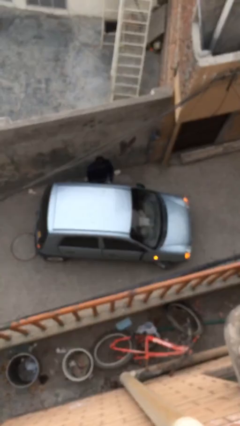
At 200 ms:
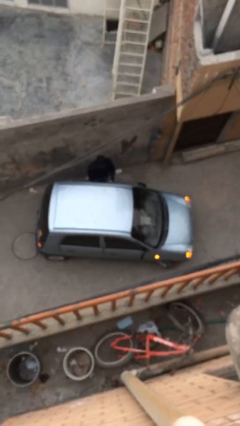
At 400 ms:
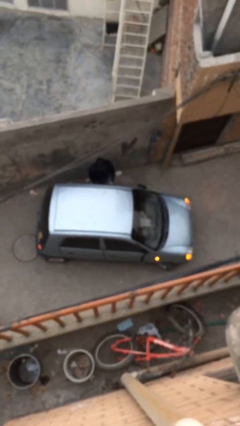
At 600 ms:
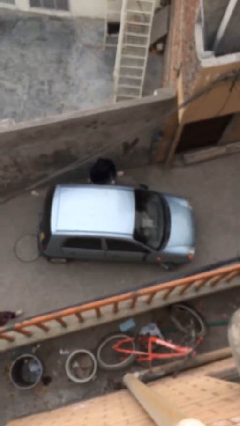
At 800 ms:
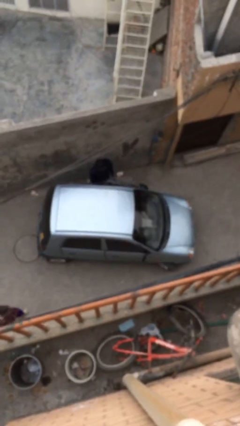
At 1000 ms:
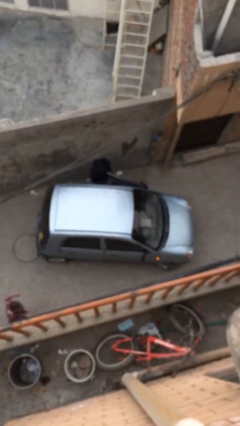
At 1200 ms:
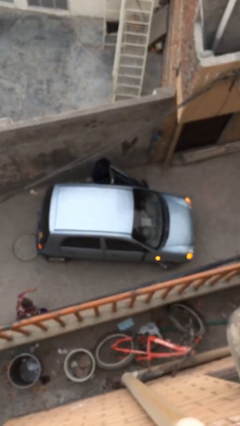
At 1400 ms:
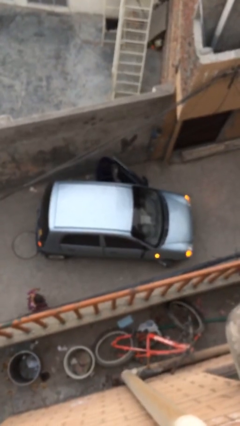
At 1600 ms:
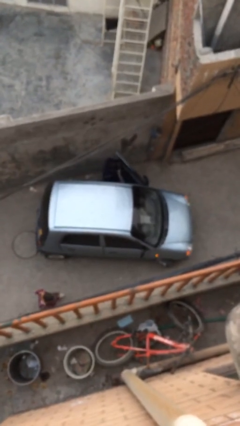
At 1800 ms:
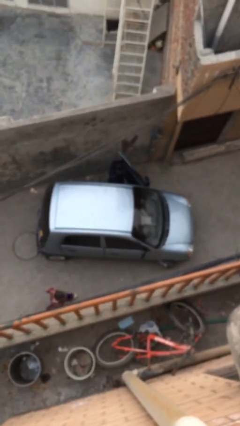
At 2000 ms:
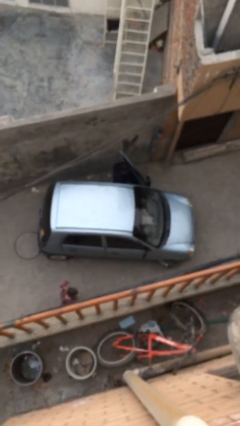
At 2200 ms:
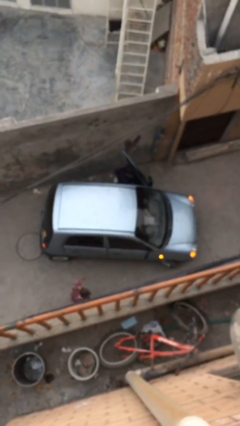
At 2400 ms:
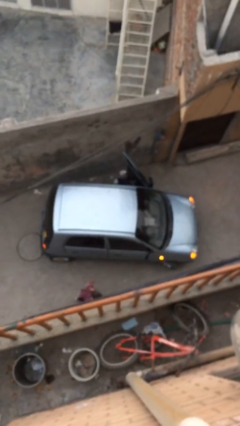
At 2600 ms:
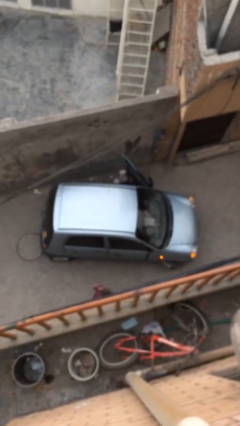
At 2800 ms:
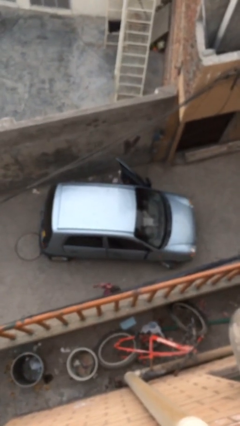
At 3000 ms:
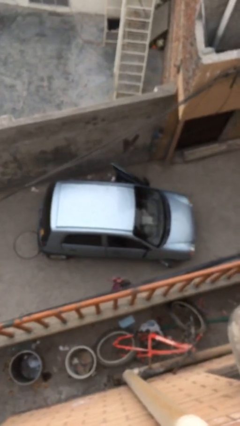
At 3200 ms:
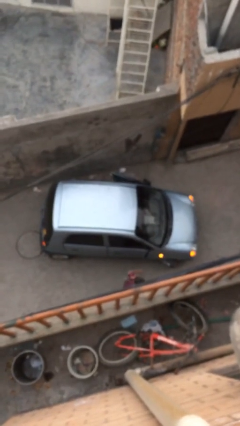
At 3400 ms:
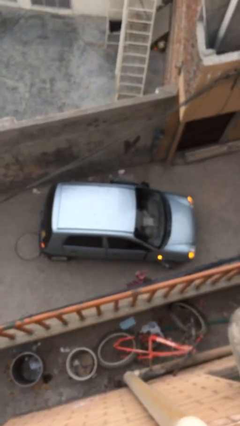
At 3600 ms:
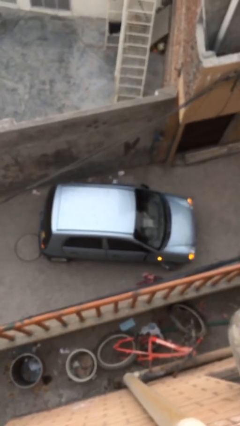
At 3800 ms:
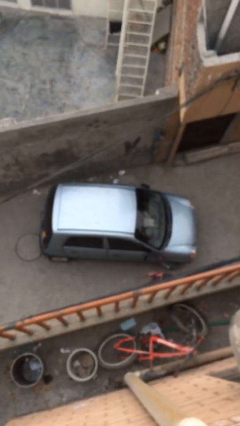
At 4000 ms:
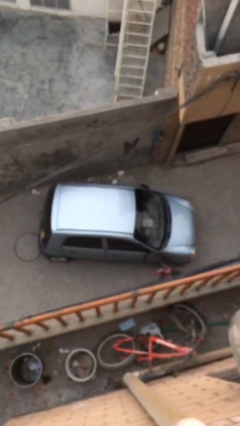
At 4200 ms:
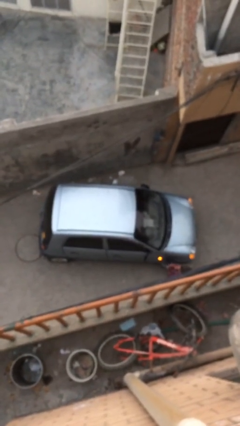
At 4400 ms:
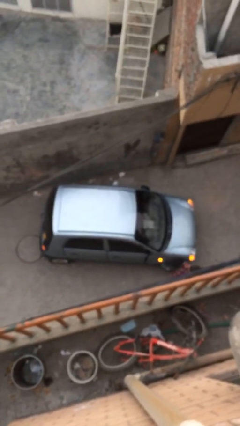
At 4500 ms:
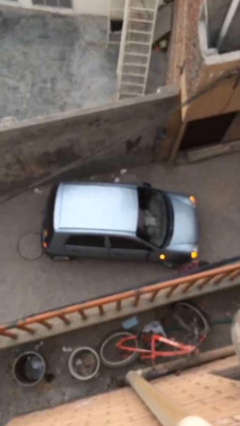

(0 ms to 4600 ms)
car picks up person

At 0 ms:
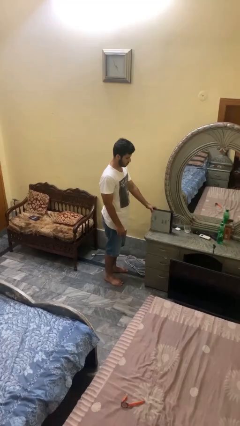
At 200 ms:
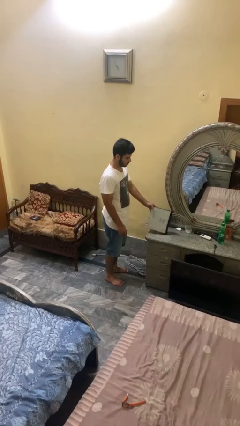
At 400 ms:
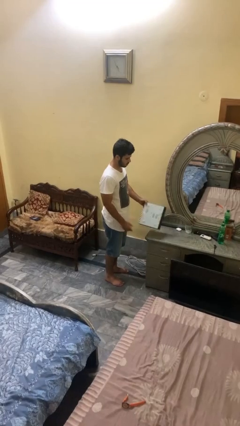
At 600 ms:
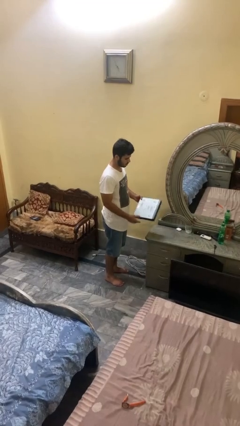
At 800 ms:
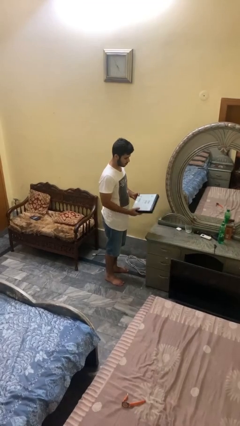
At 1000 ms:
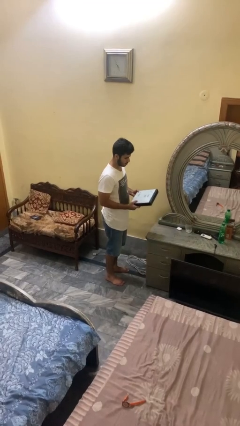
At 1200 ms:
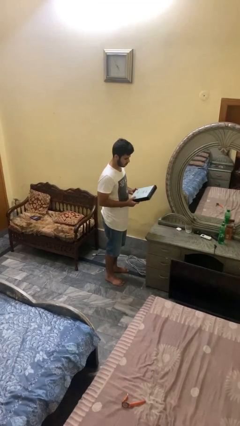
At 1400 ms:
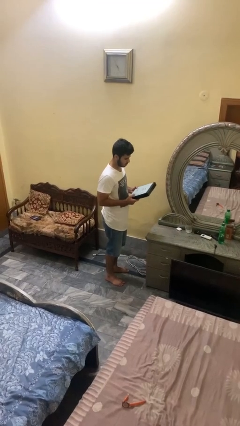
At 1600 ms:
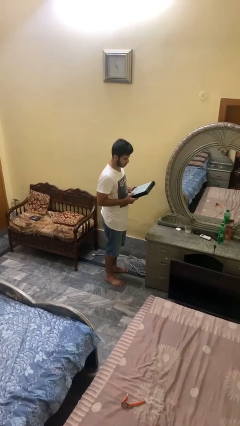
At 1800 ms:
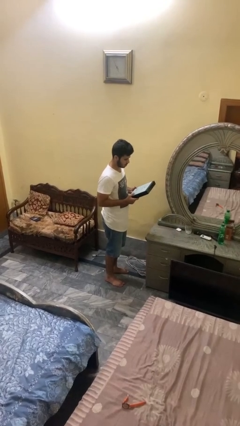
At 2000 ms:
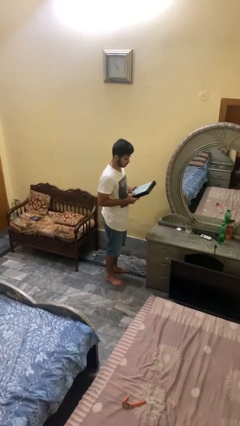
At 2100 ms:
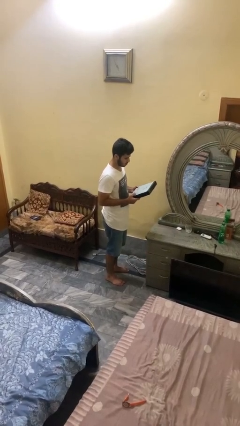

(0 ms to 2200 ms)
person picks up object from countertop

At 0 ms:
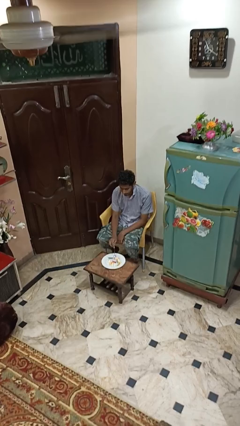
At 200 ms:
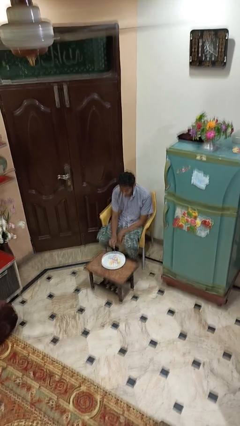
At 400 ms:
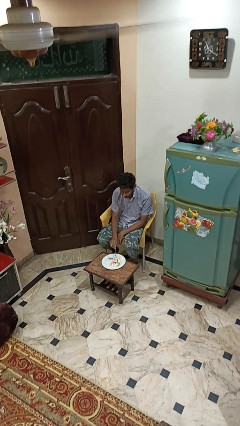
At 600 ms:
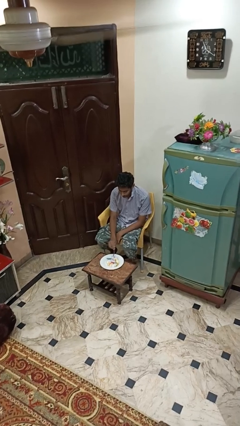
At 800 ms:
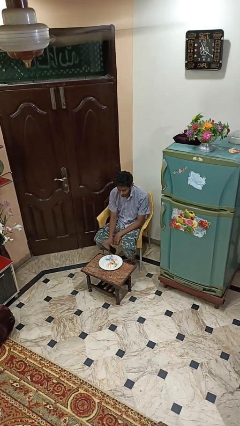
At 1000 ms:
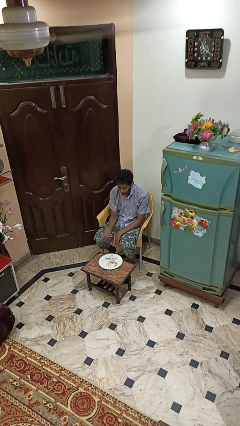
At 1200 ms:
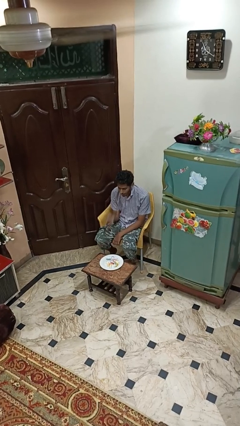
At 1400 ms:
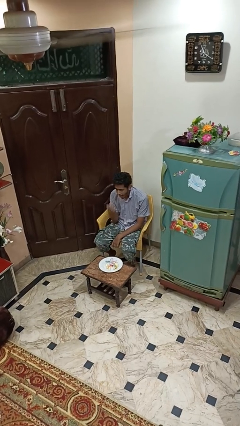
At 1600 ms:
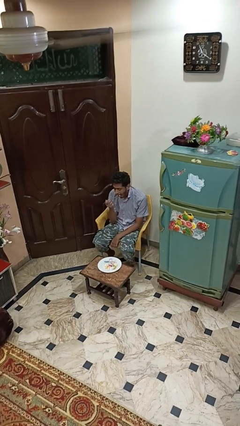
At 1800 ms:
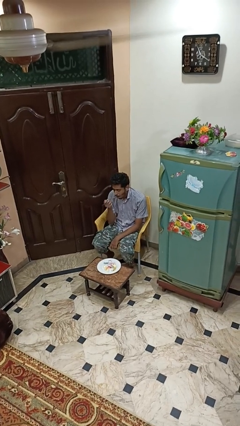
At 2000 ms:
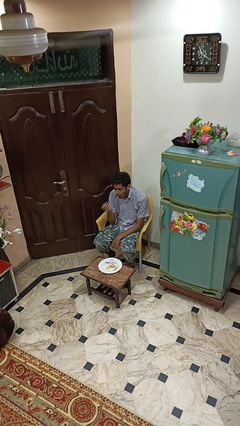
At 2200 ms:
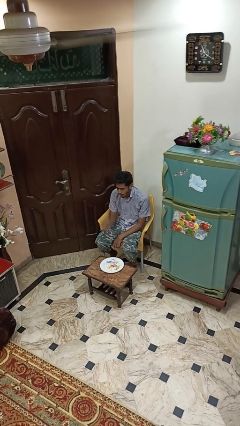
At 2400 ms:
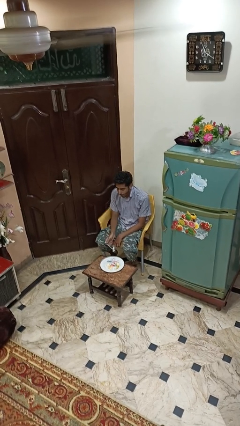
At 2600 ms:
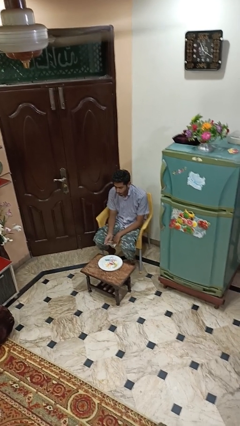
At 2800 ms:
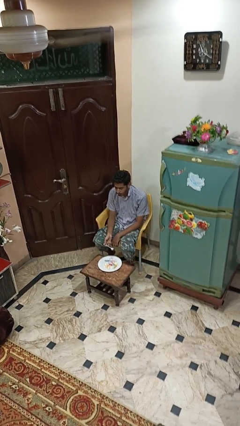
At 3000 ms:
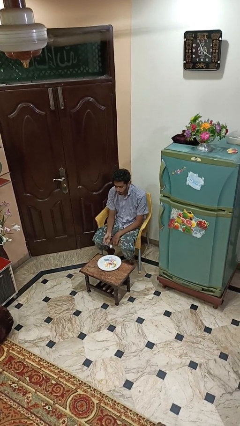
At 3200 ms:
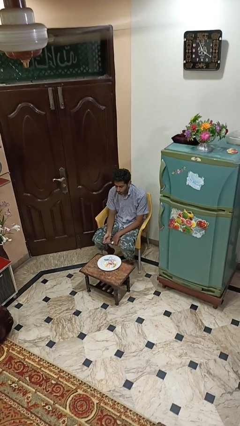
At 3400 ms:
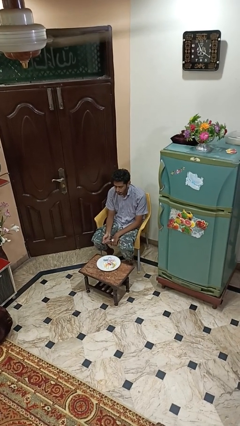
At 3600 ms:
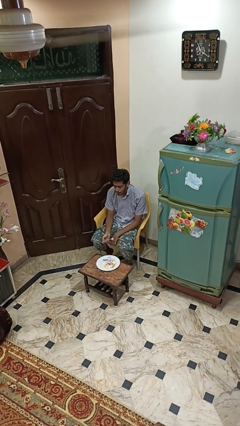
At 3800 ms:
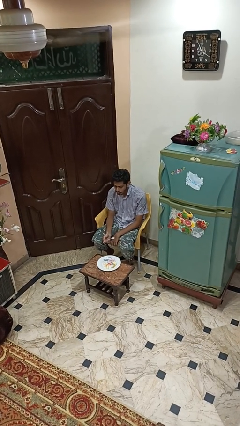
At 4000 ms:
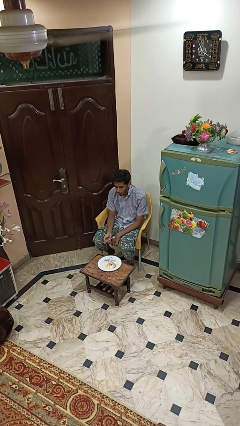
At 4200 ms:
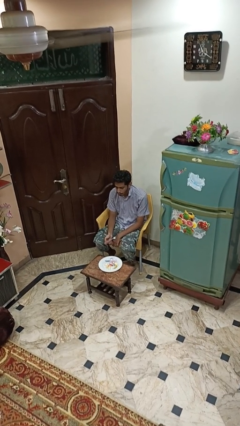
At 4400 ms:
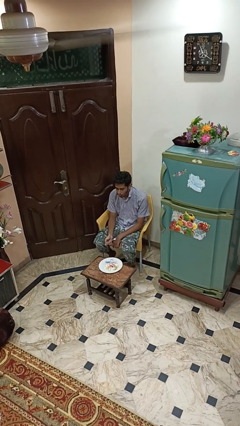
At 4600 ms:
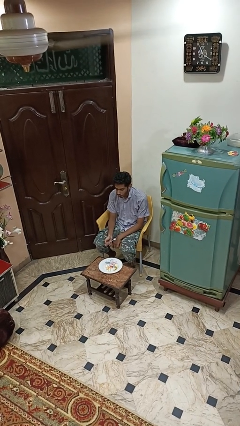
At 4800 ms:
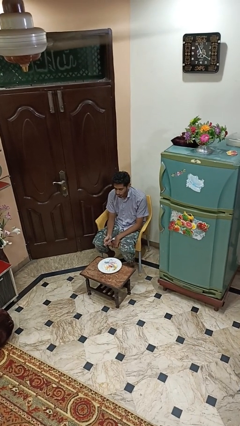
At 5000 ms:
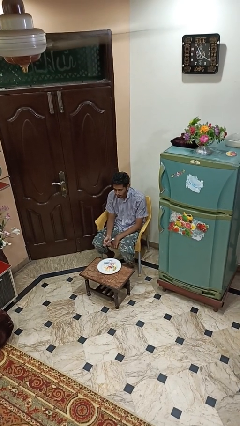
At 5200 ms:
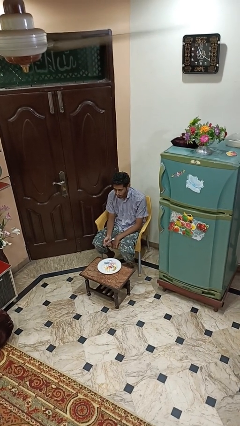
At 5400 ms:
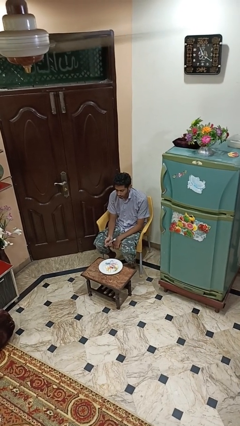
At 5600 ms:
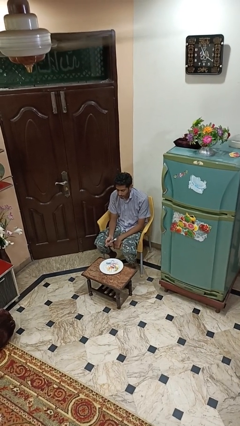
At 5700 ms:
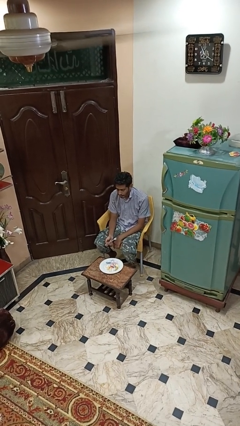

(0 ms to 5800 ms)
person eats with utensil

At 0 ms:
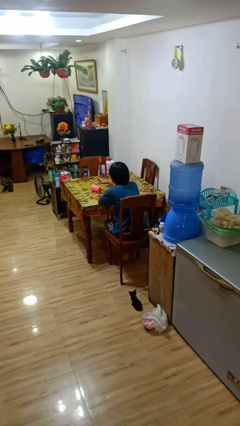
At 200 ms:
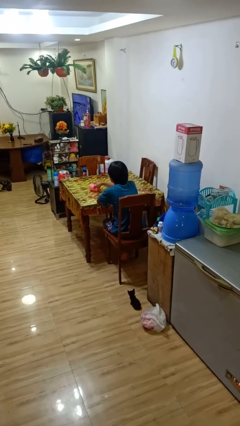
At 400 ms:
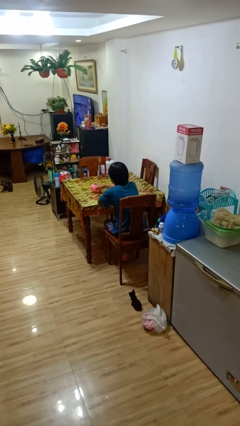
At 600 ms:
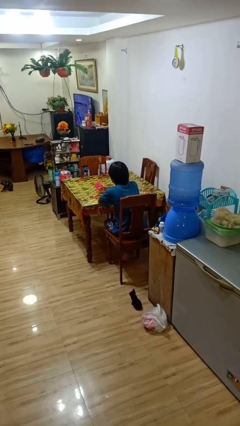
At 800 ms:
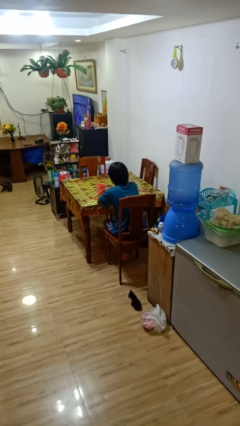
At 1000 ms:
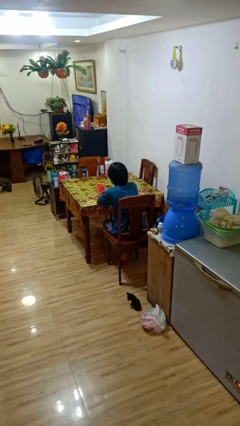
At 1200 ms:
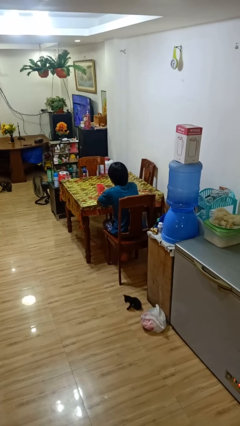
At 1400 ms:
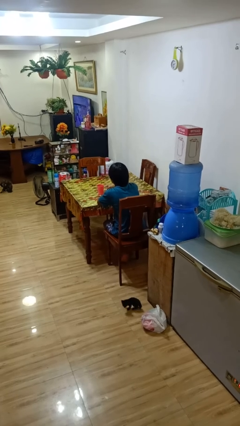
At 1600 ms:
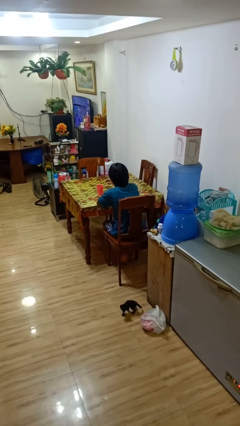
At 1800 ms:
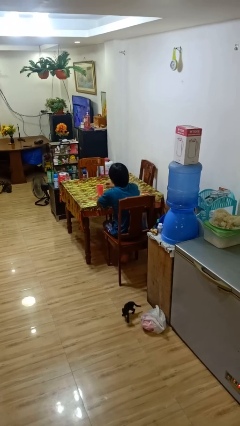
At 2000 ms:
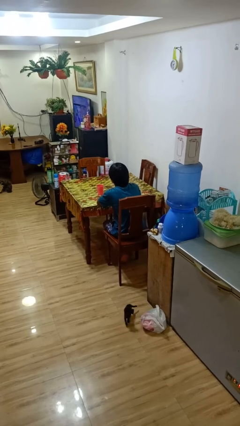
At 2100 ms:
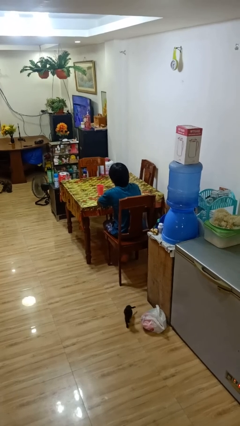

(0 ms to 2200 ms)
person sets upright glass

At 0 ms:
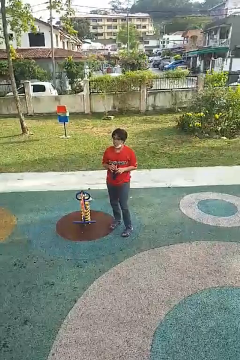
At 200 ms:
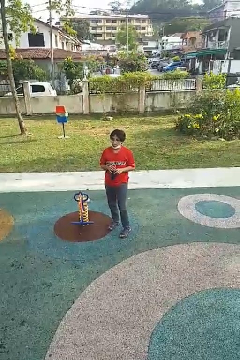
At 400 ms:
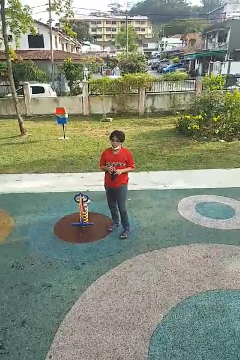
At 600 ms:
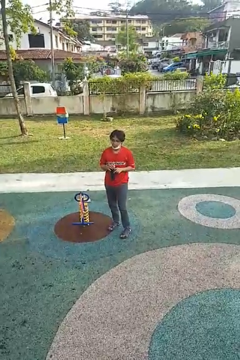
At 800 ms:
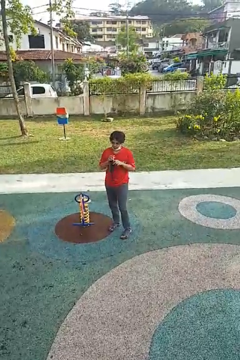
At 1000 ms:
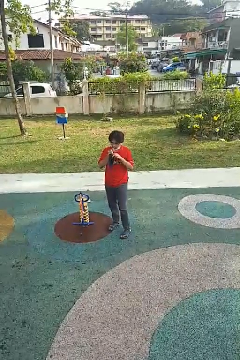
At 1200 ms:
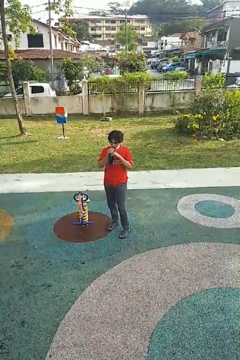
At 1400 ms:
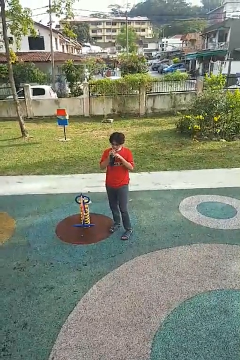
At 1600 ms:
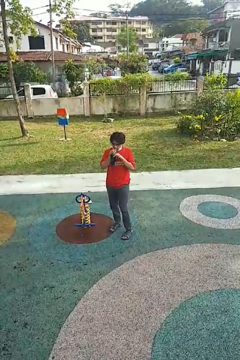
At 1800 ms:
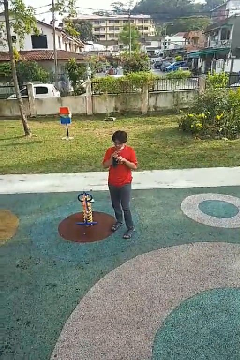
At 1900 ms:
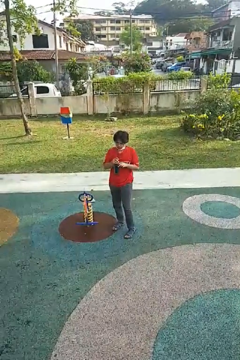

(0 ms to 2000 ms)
person drinks from straw

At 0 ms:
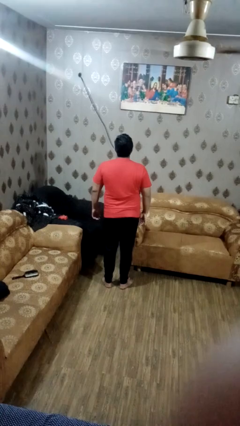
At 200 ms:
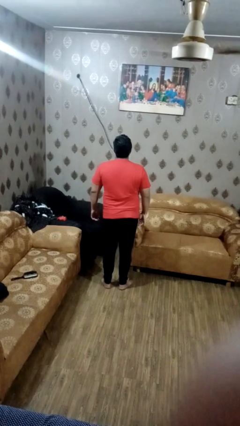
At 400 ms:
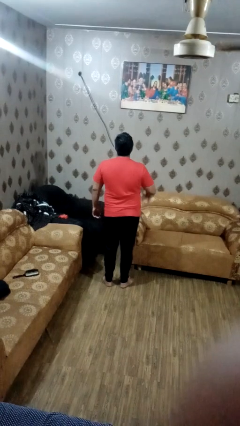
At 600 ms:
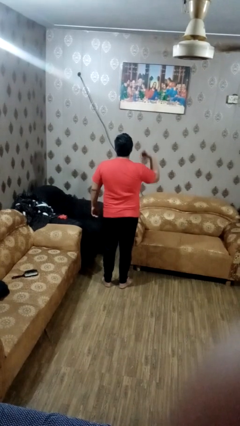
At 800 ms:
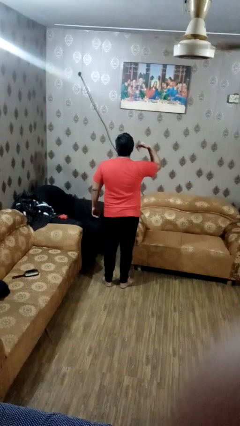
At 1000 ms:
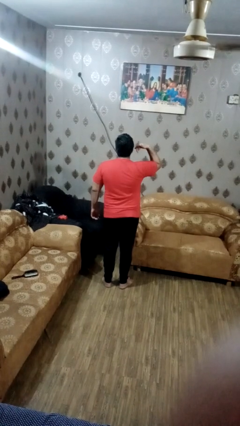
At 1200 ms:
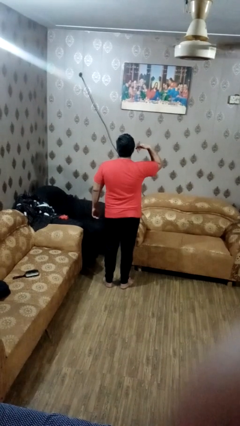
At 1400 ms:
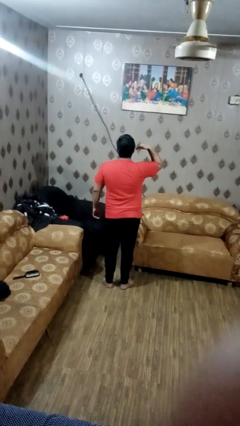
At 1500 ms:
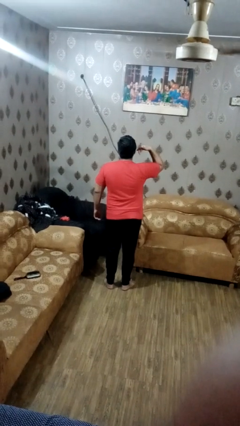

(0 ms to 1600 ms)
person gestures call me
